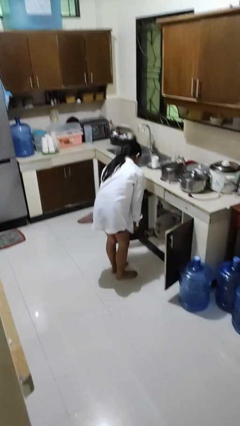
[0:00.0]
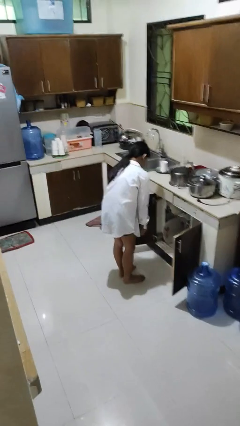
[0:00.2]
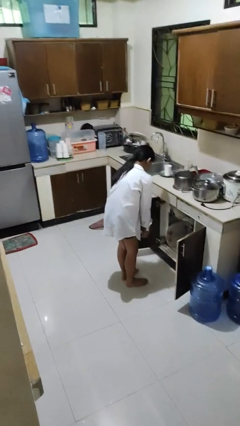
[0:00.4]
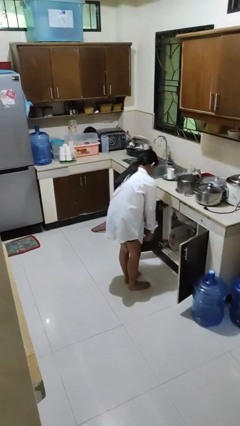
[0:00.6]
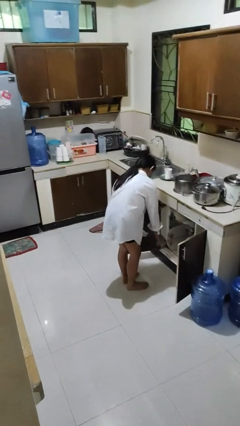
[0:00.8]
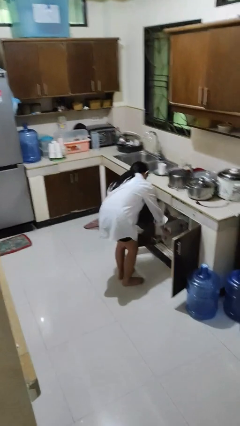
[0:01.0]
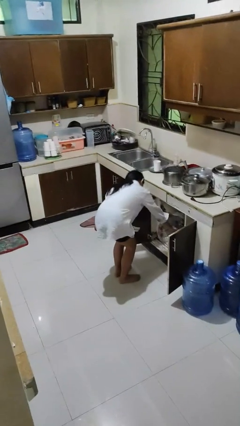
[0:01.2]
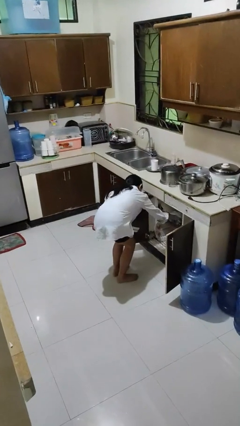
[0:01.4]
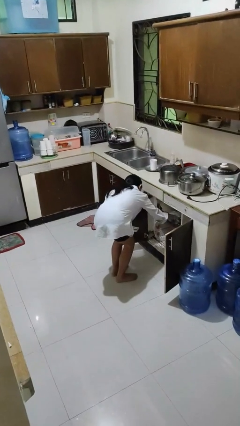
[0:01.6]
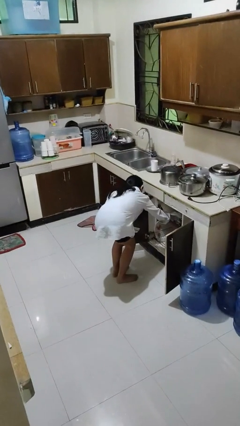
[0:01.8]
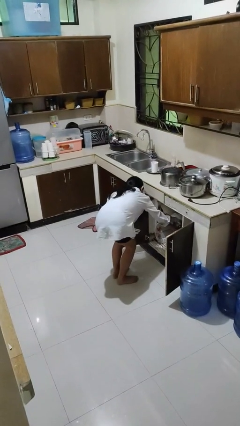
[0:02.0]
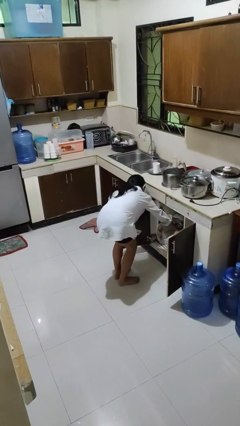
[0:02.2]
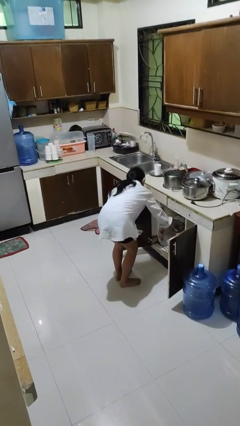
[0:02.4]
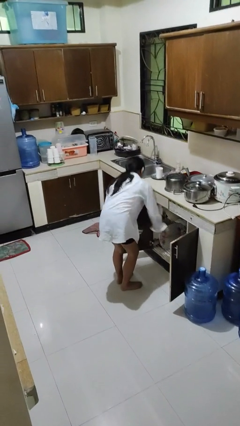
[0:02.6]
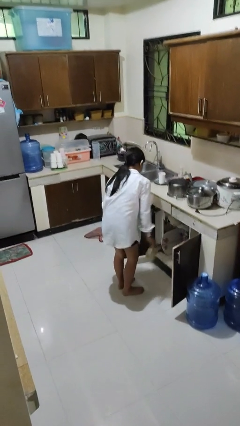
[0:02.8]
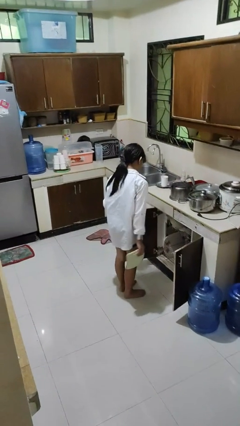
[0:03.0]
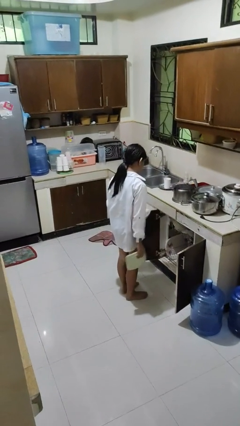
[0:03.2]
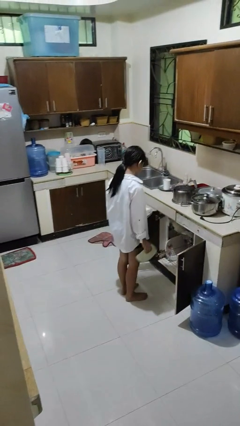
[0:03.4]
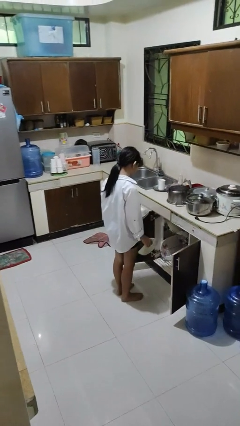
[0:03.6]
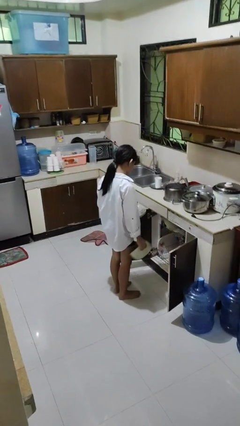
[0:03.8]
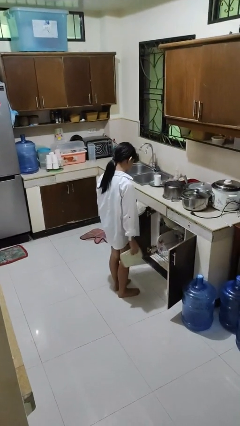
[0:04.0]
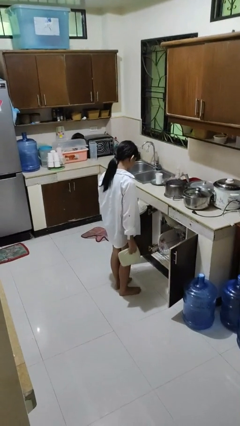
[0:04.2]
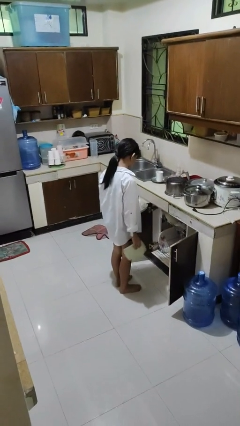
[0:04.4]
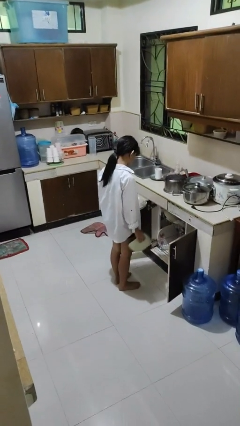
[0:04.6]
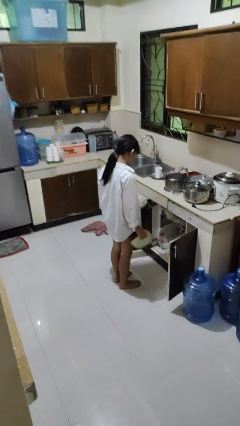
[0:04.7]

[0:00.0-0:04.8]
person unloads dishwasher

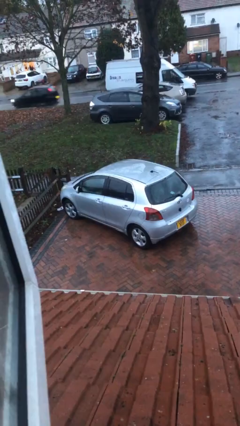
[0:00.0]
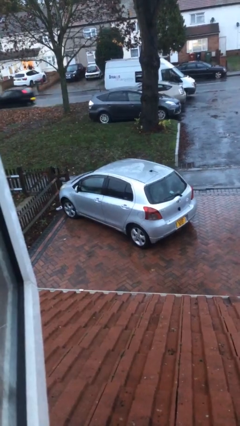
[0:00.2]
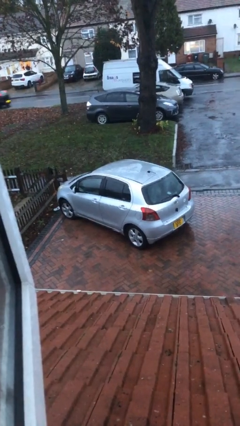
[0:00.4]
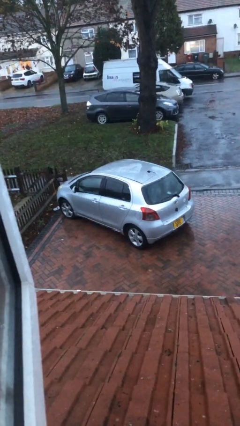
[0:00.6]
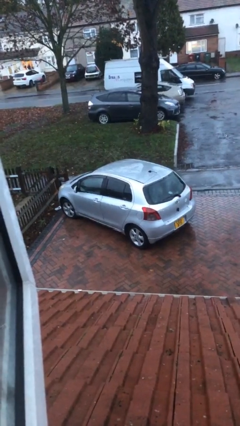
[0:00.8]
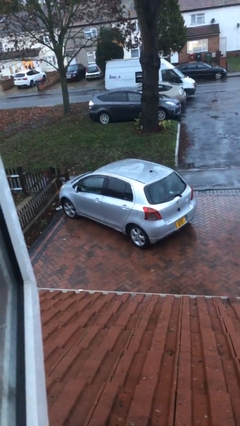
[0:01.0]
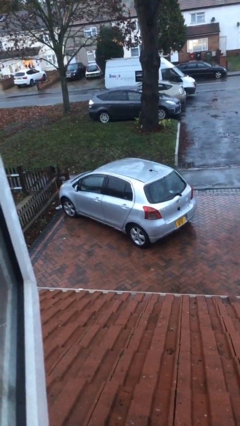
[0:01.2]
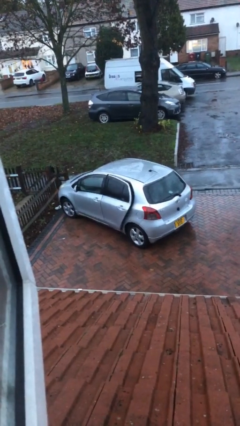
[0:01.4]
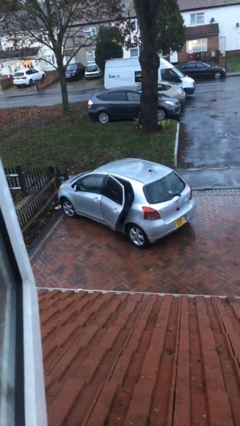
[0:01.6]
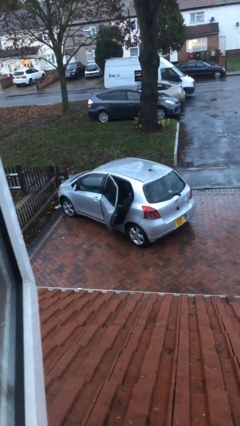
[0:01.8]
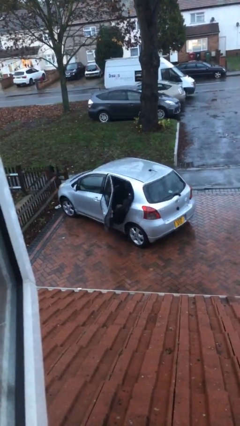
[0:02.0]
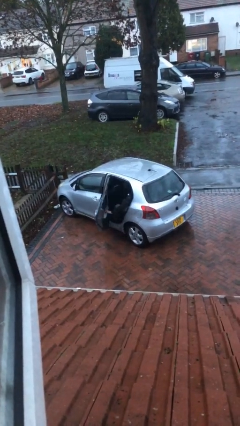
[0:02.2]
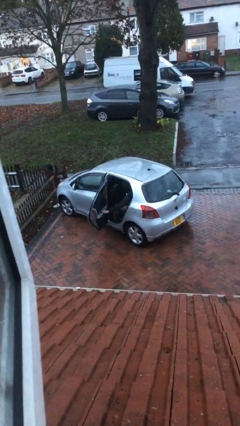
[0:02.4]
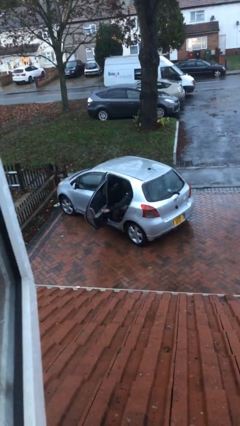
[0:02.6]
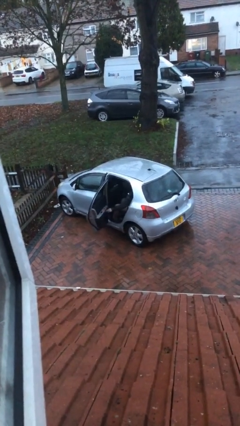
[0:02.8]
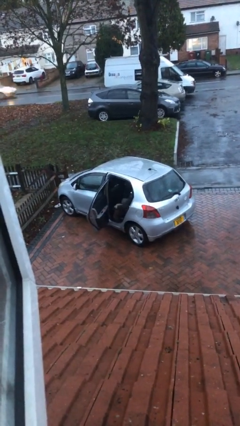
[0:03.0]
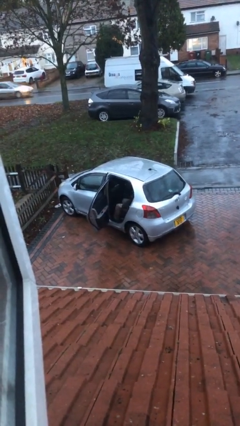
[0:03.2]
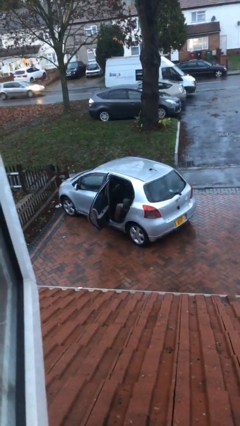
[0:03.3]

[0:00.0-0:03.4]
person opens car door

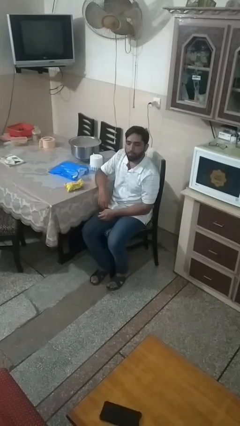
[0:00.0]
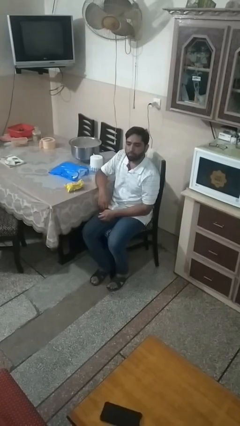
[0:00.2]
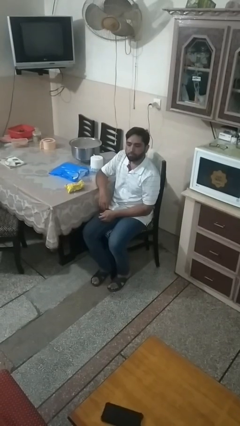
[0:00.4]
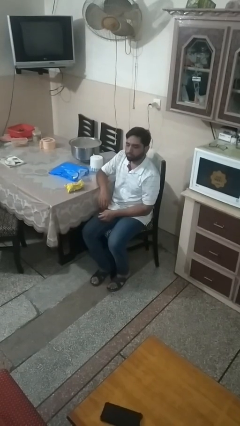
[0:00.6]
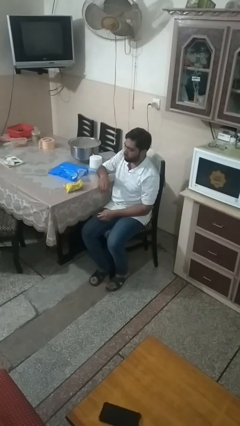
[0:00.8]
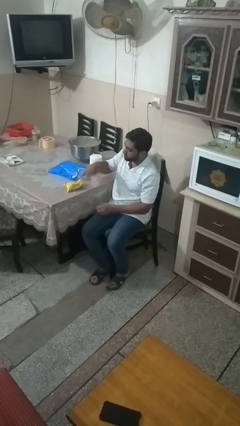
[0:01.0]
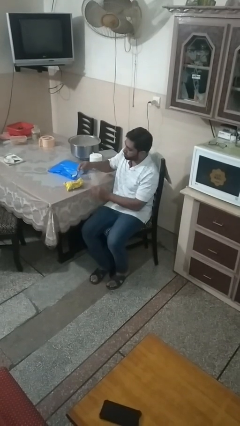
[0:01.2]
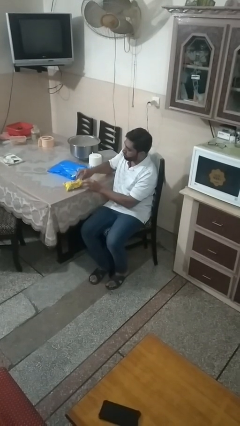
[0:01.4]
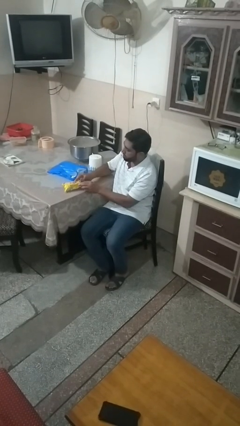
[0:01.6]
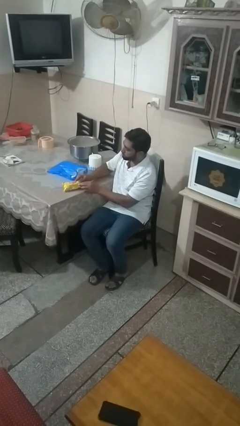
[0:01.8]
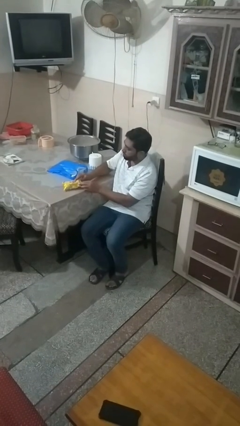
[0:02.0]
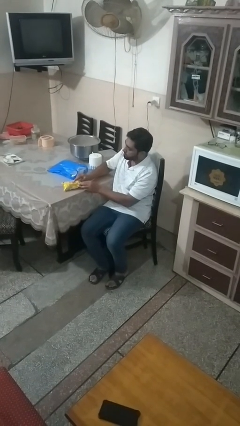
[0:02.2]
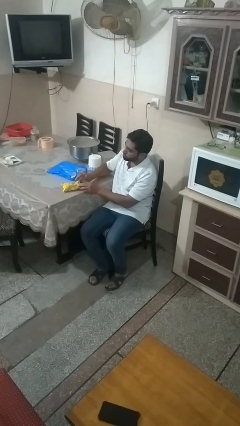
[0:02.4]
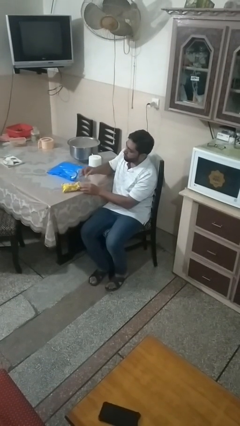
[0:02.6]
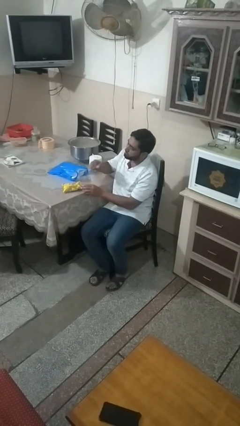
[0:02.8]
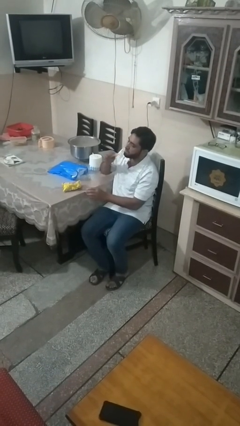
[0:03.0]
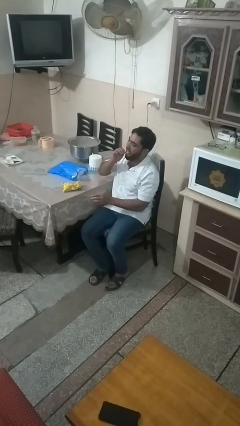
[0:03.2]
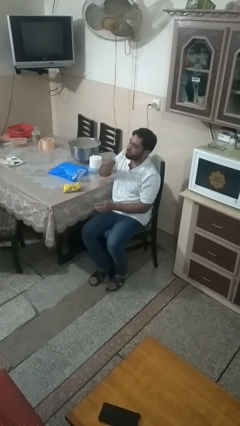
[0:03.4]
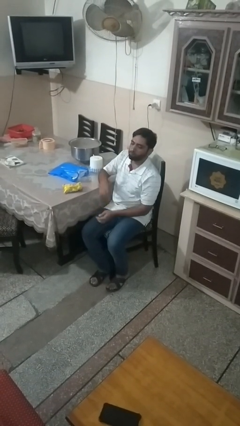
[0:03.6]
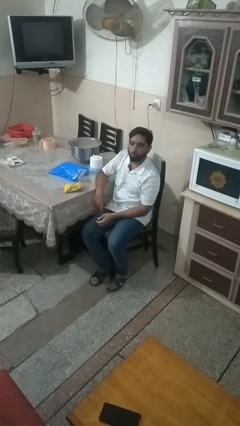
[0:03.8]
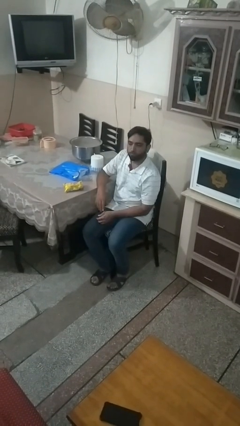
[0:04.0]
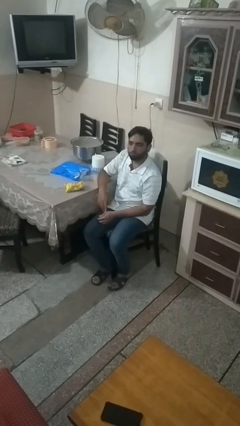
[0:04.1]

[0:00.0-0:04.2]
person eats snack from bag

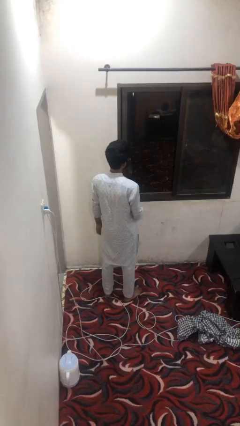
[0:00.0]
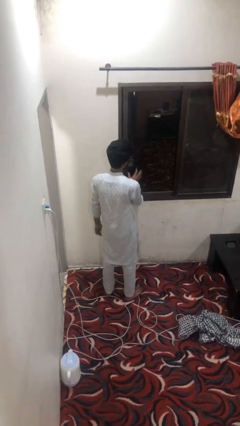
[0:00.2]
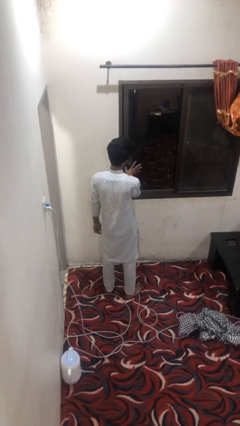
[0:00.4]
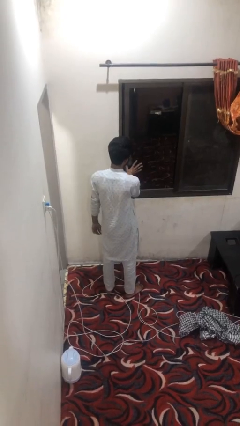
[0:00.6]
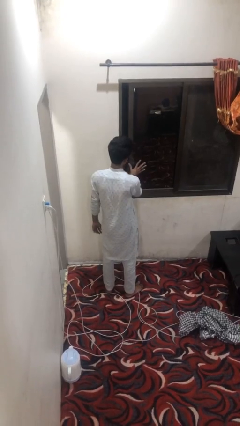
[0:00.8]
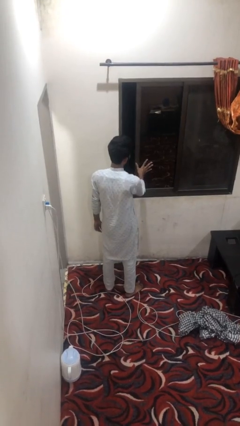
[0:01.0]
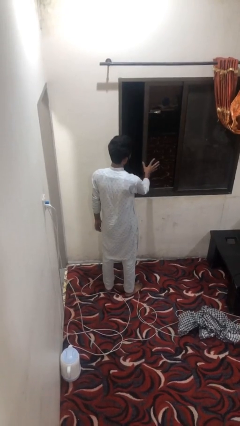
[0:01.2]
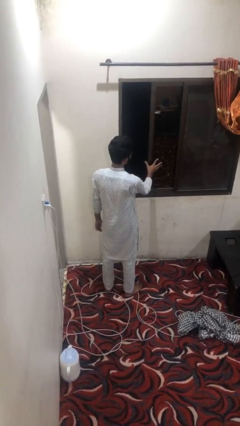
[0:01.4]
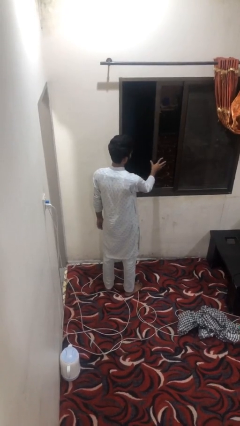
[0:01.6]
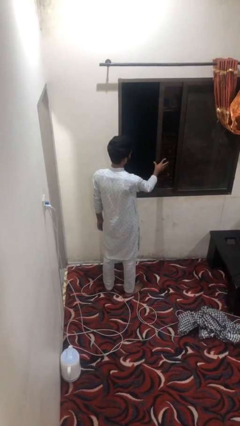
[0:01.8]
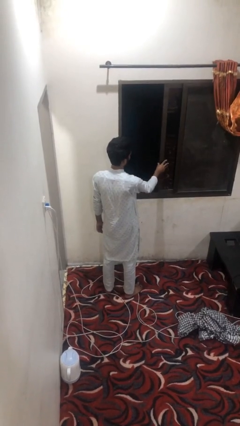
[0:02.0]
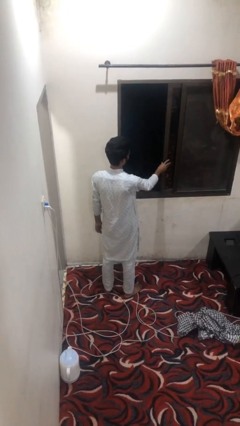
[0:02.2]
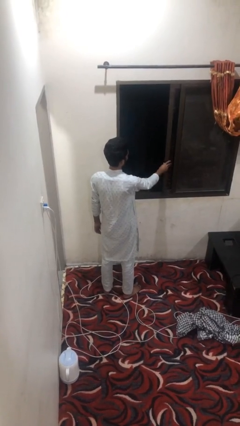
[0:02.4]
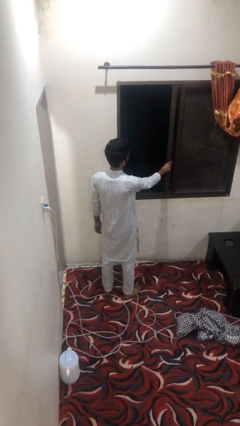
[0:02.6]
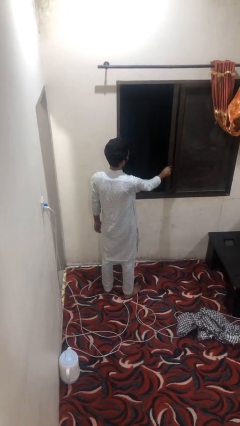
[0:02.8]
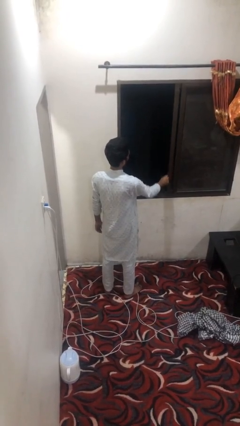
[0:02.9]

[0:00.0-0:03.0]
person opens home window

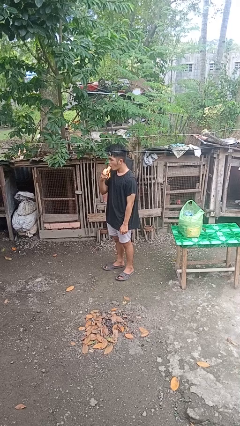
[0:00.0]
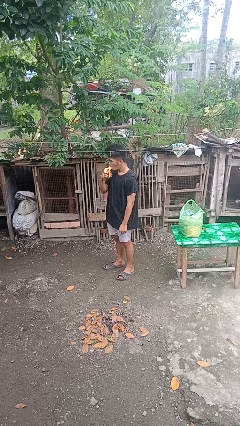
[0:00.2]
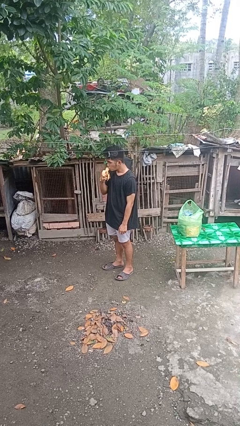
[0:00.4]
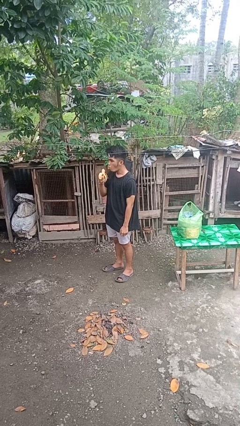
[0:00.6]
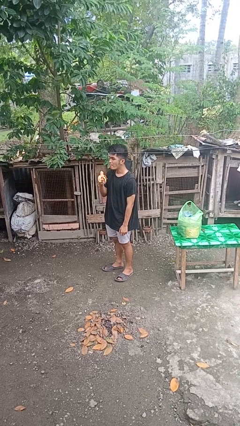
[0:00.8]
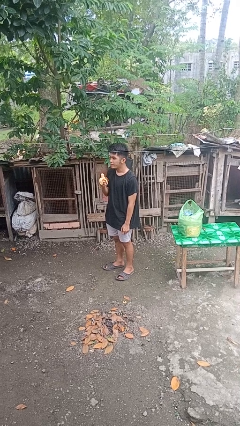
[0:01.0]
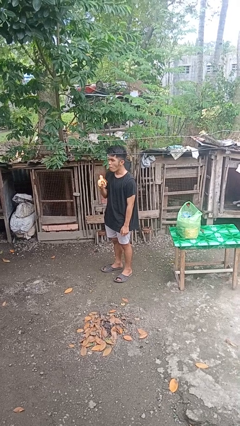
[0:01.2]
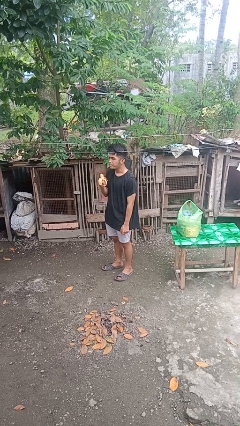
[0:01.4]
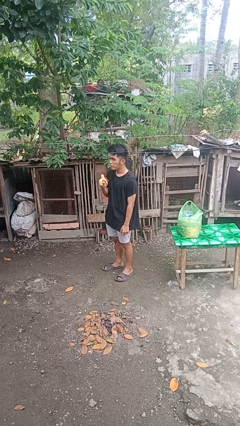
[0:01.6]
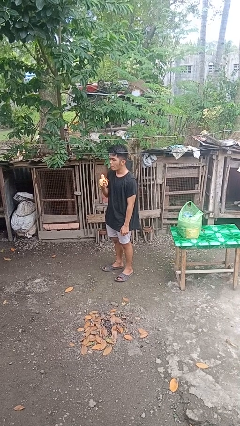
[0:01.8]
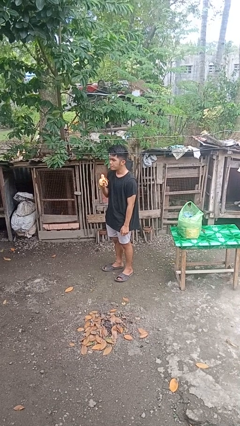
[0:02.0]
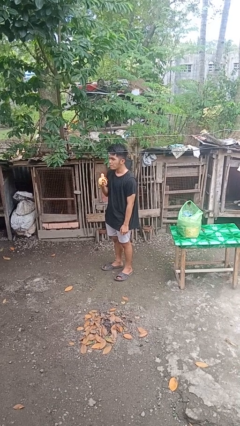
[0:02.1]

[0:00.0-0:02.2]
person eats banana

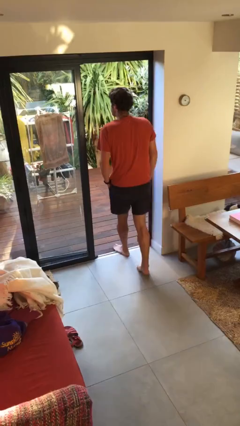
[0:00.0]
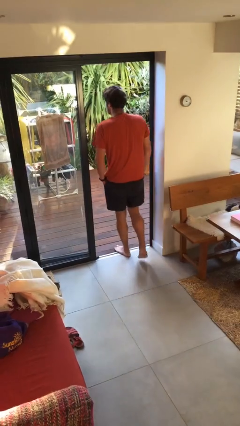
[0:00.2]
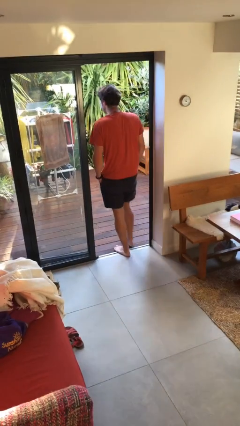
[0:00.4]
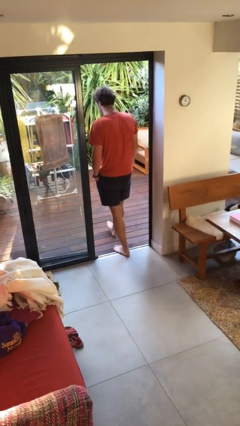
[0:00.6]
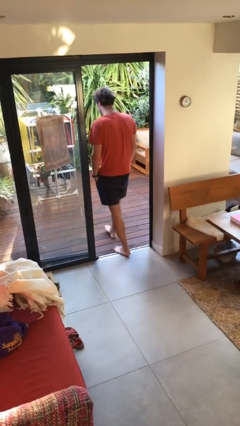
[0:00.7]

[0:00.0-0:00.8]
person exits scene through structure
